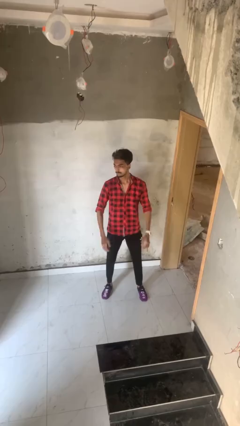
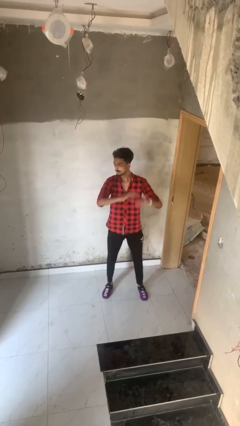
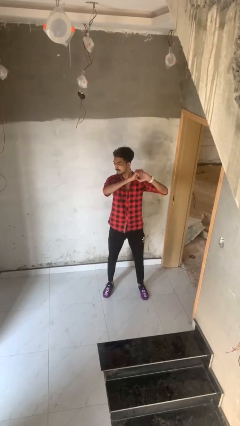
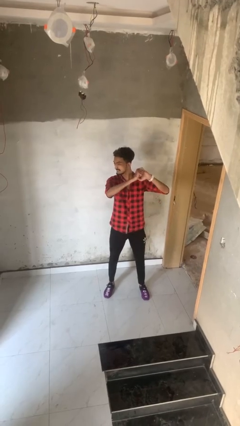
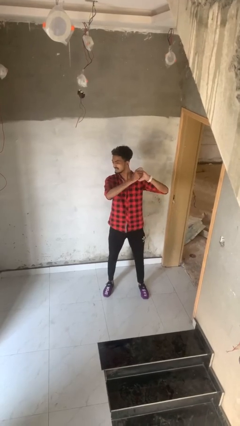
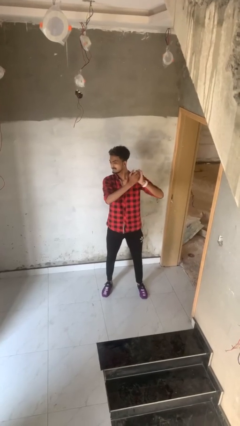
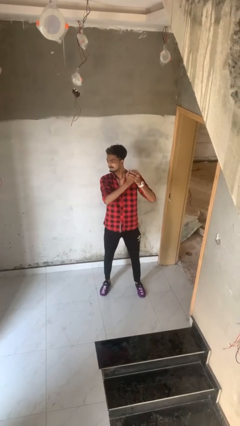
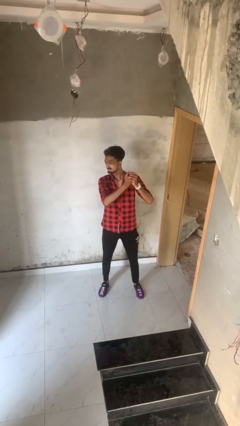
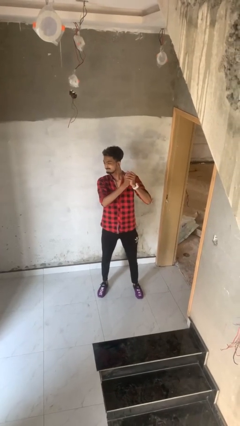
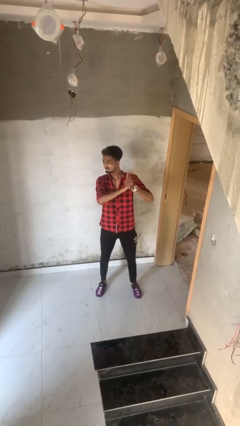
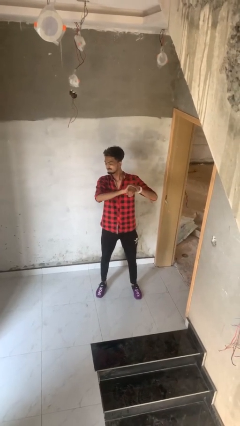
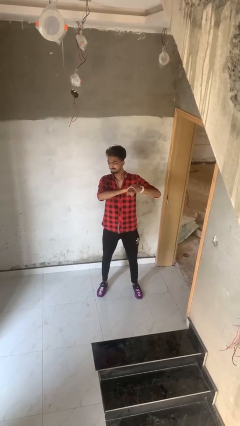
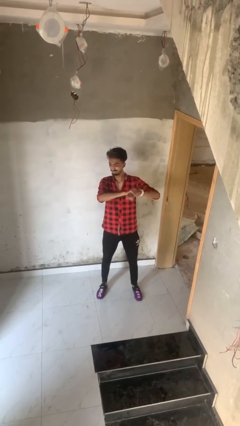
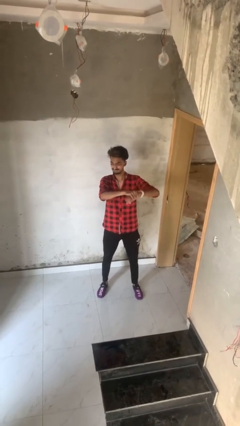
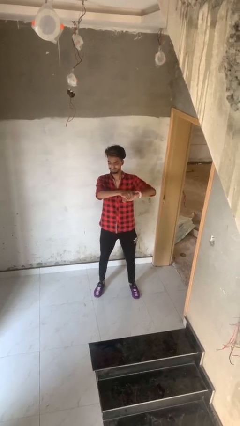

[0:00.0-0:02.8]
person cracks knuckles

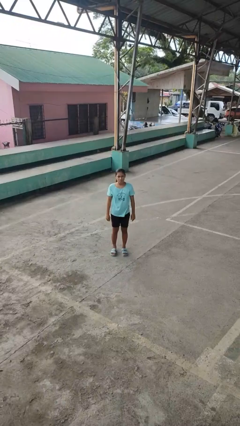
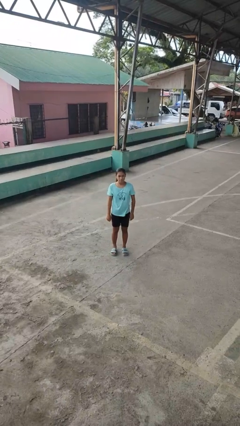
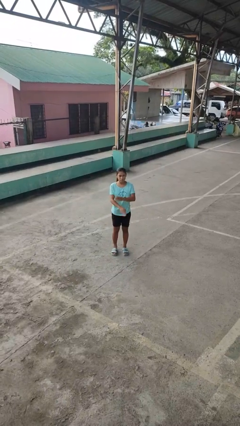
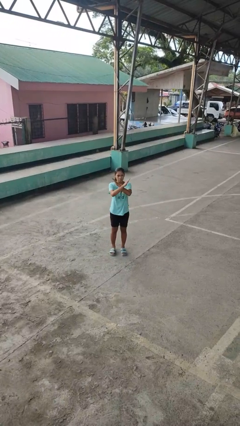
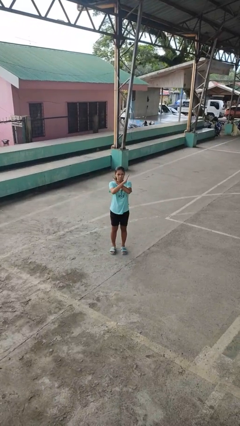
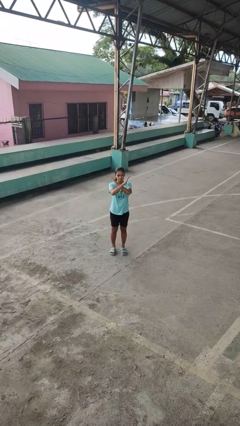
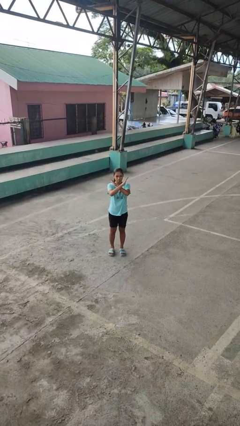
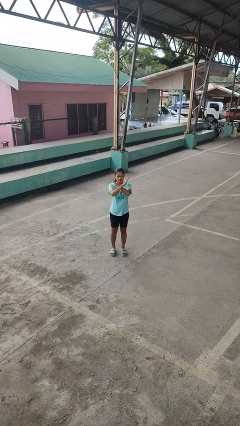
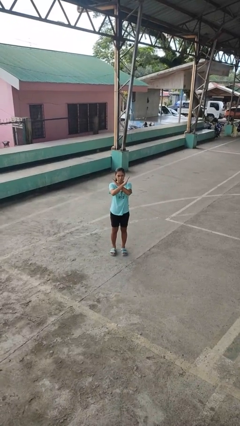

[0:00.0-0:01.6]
person gestures arms x

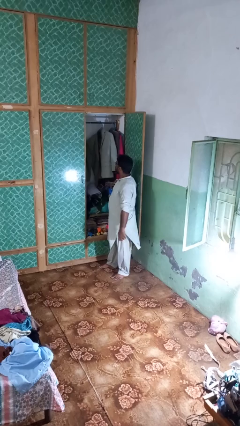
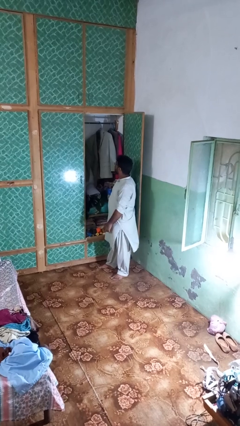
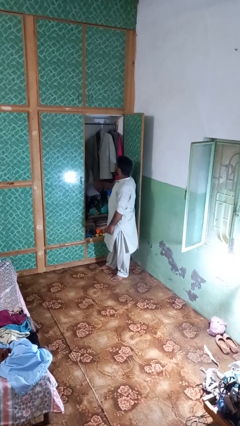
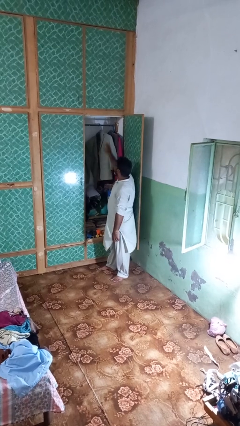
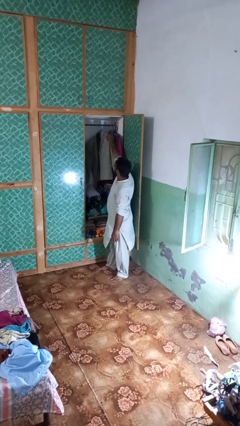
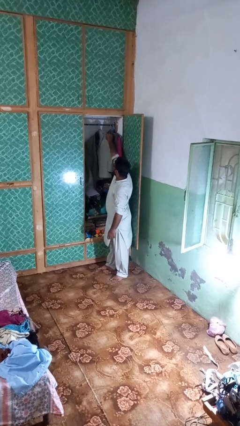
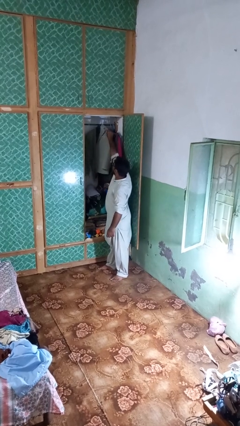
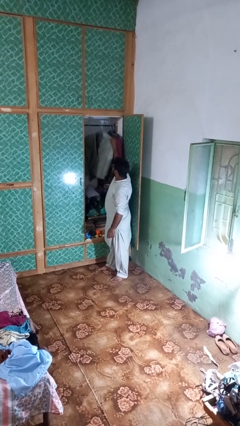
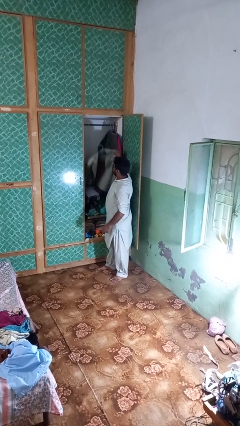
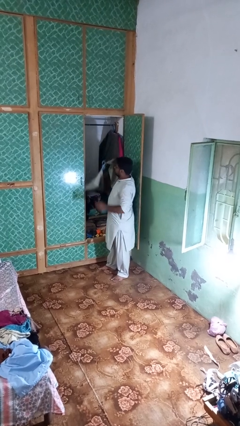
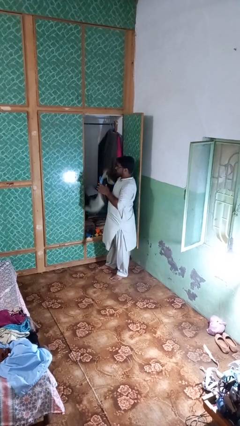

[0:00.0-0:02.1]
person takes clothes from closet

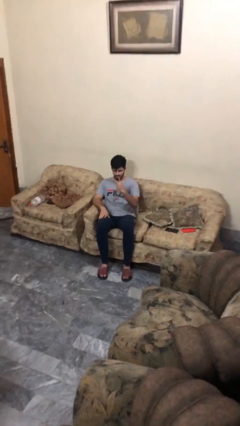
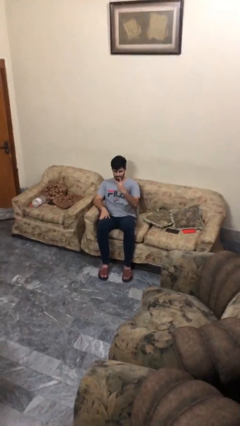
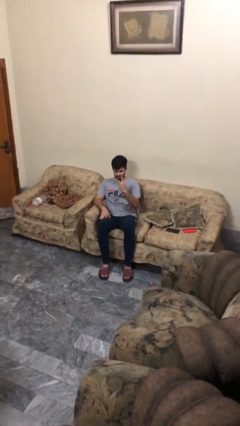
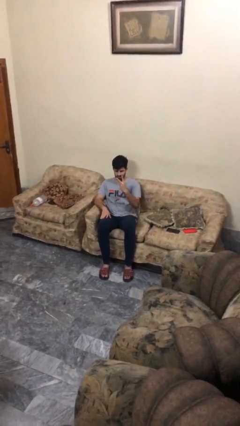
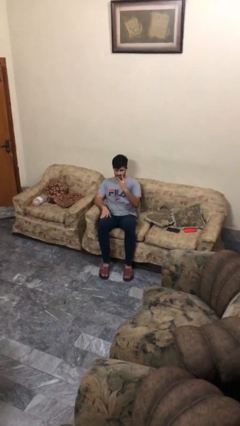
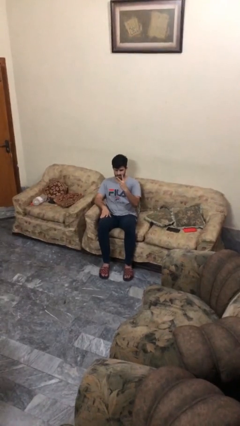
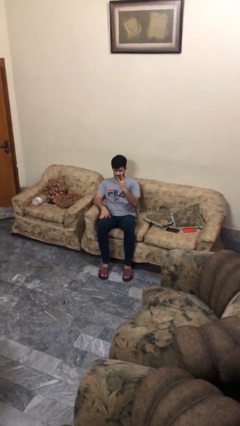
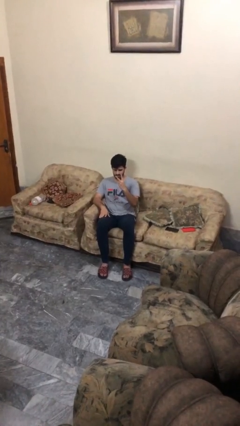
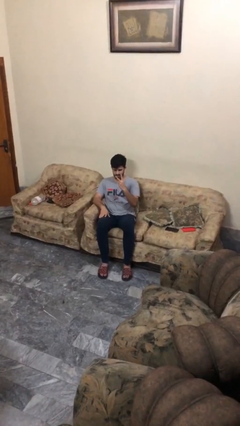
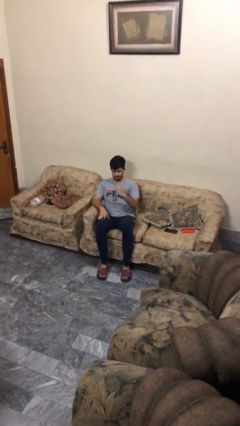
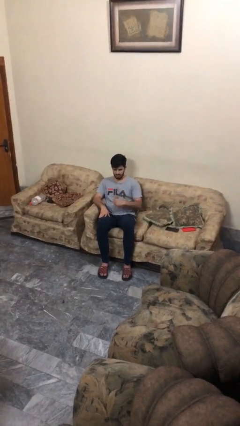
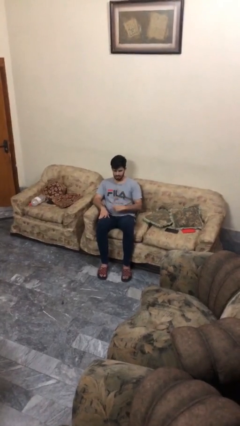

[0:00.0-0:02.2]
person gestures peace

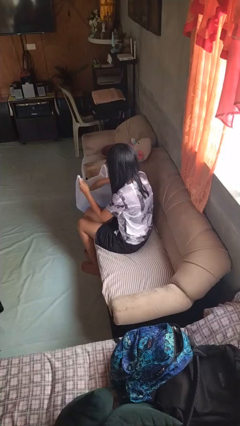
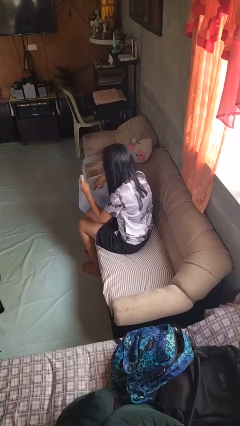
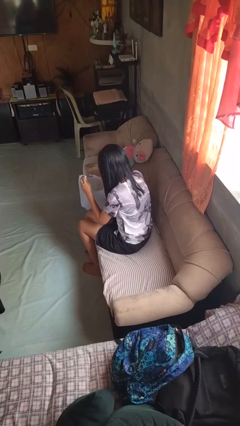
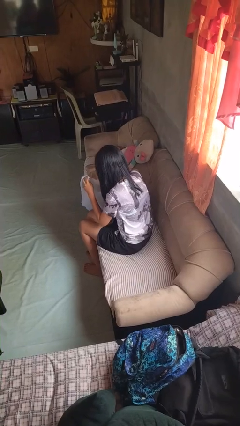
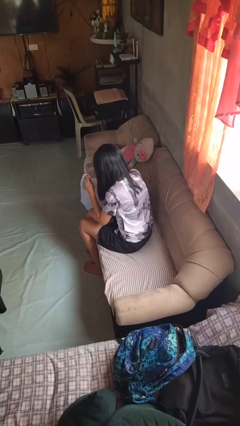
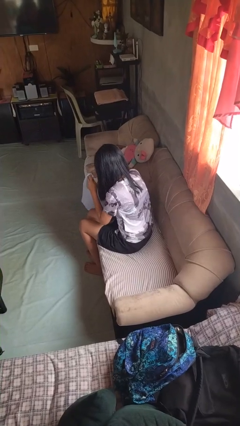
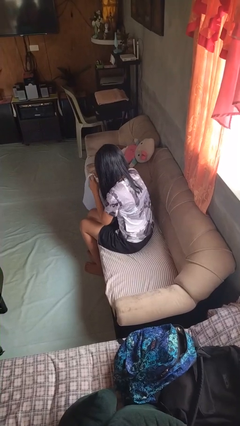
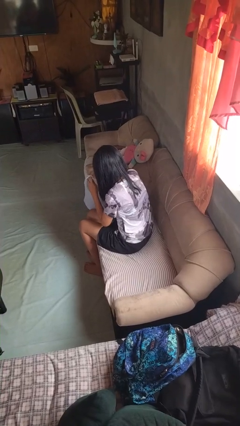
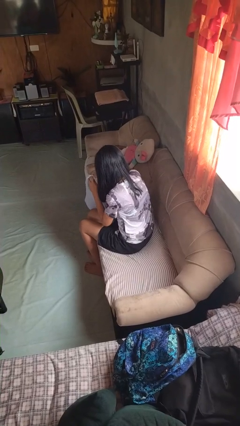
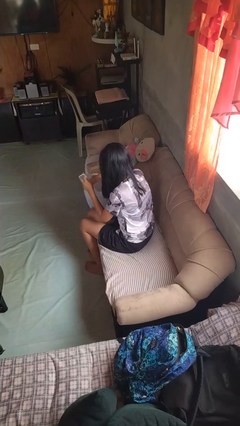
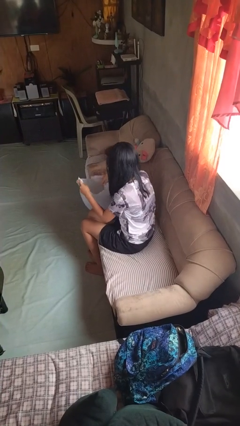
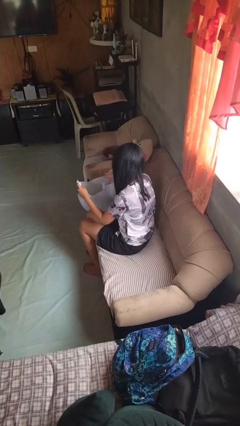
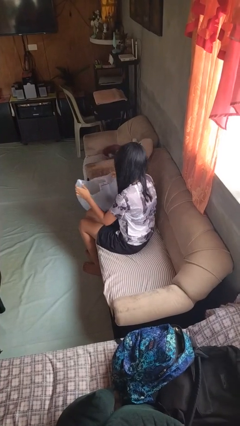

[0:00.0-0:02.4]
person searches in bag

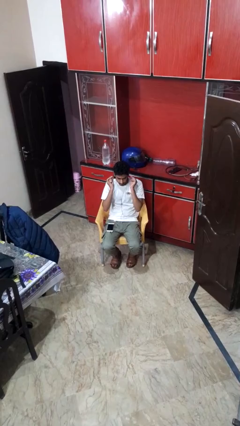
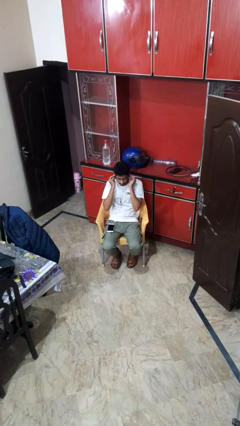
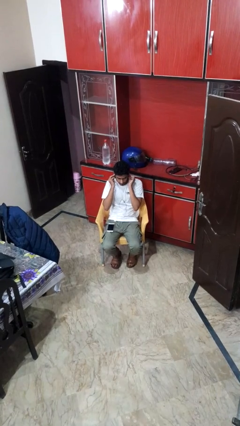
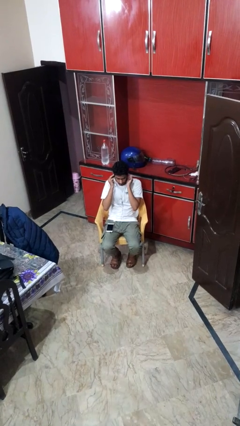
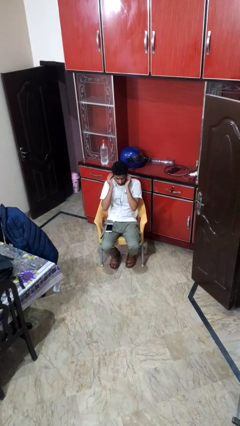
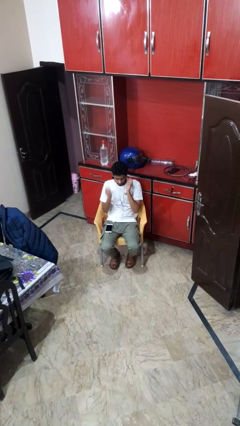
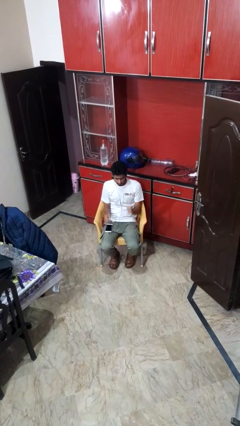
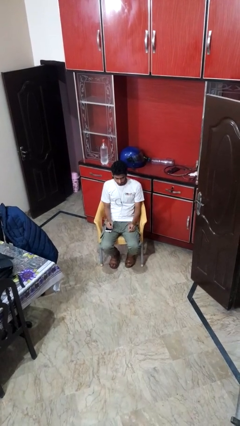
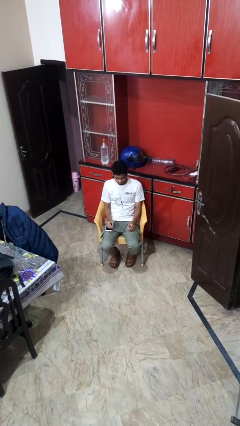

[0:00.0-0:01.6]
person puts on headphones

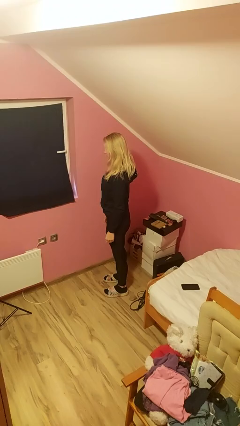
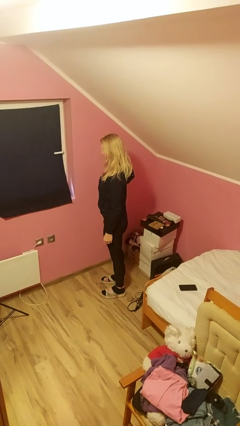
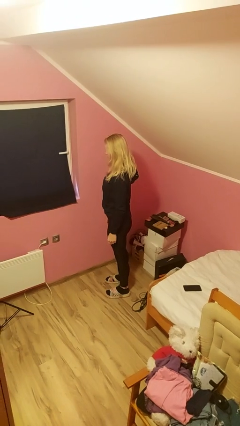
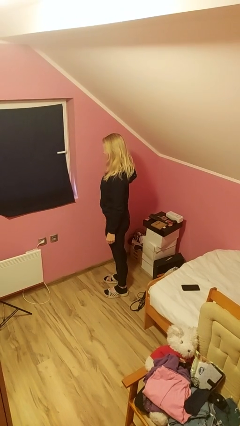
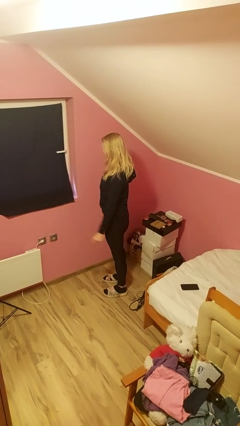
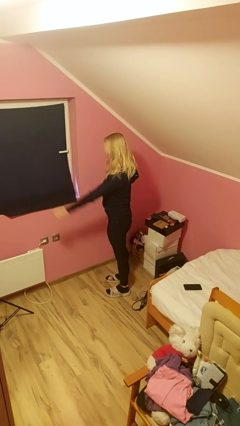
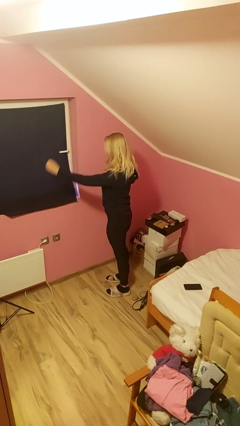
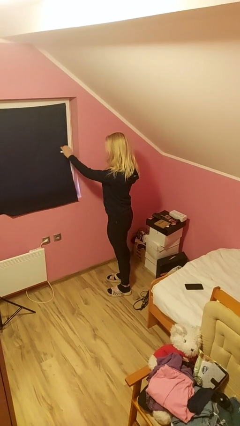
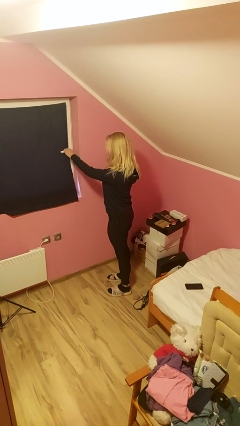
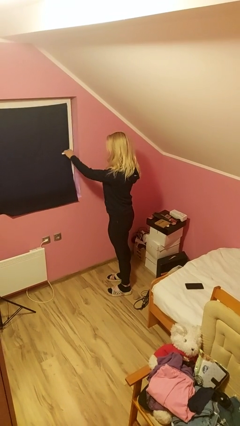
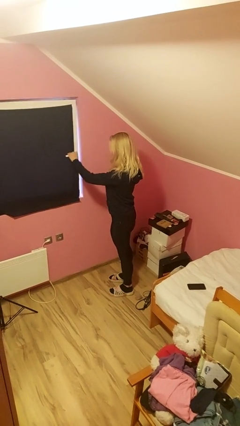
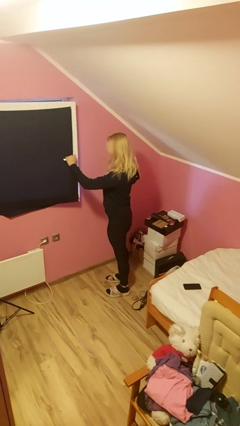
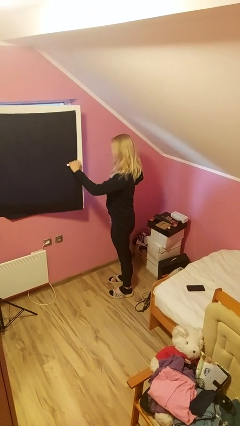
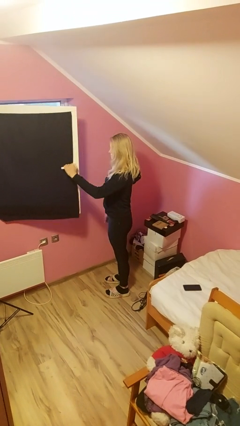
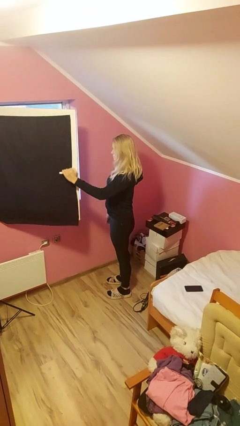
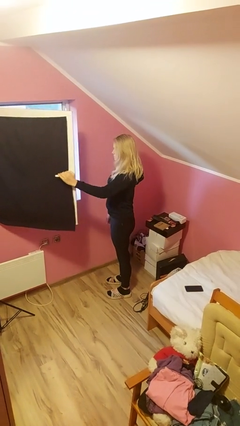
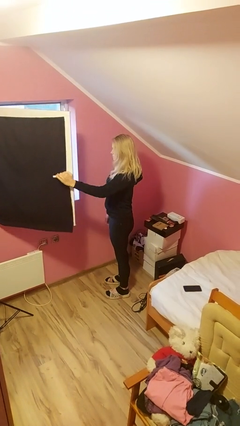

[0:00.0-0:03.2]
person opens home window

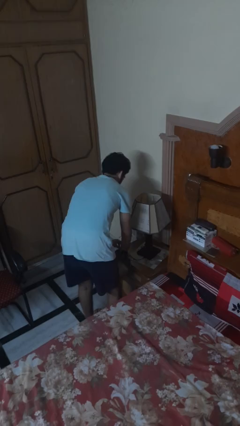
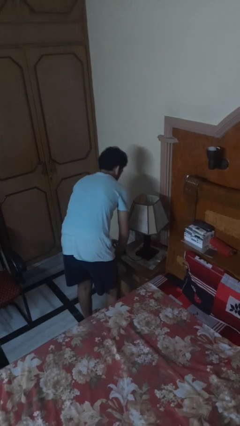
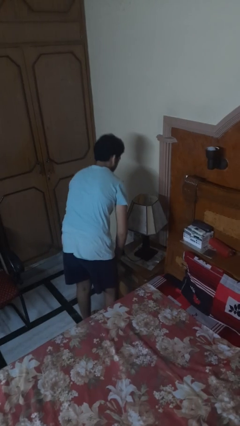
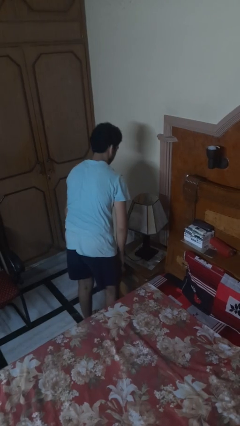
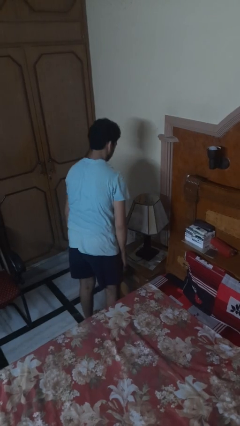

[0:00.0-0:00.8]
person turns off lamp
